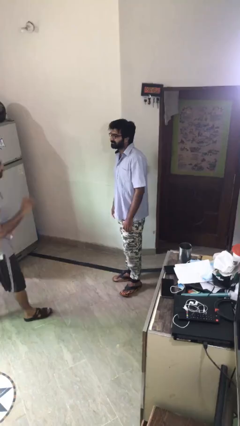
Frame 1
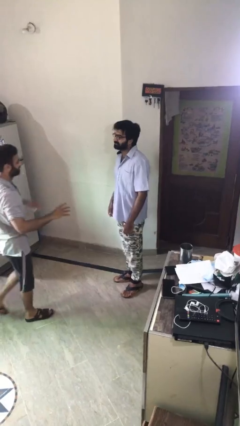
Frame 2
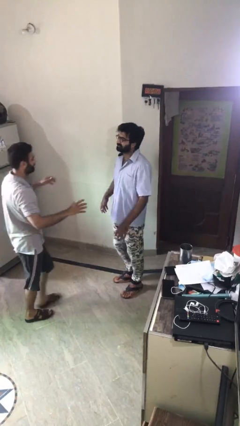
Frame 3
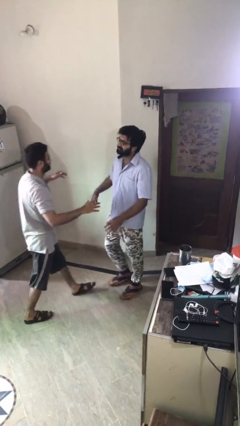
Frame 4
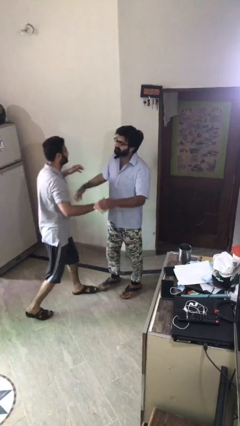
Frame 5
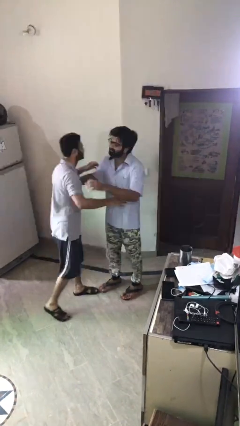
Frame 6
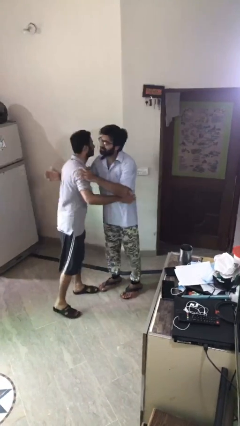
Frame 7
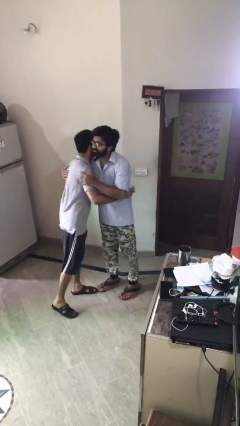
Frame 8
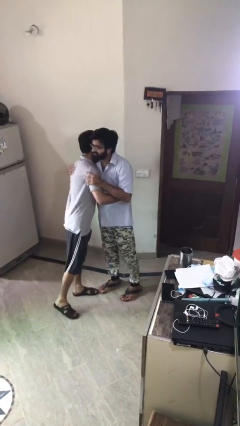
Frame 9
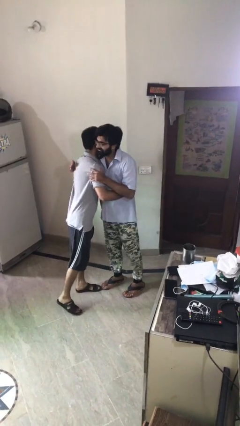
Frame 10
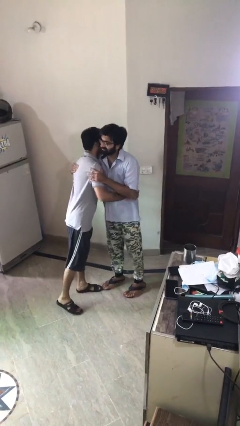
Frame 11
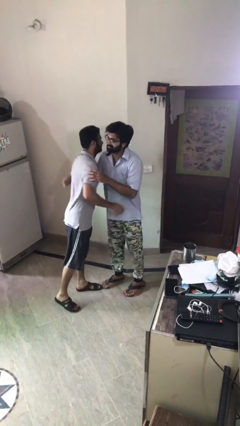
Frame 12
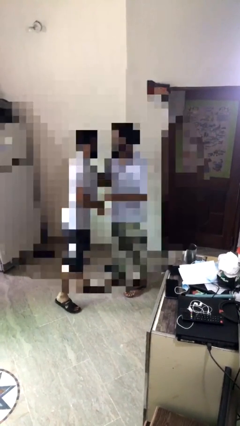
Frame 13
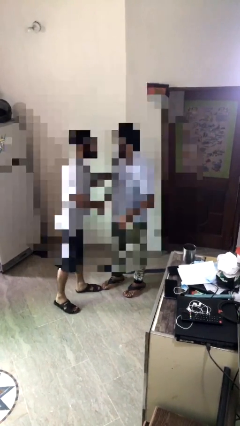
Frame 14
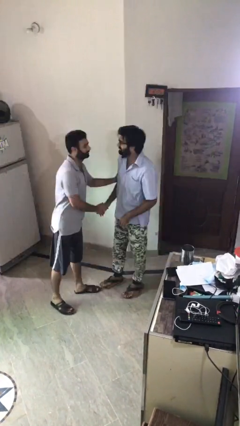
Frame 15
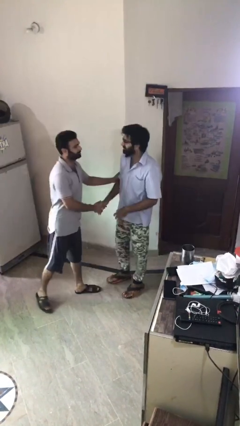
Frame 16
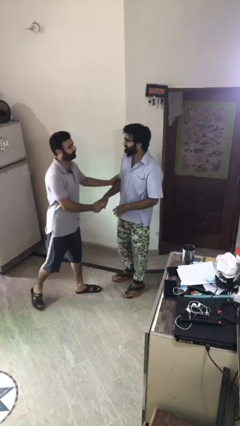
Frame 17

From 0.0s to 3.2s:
person embraces person

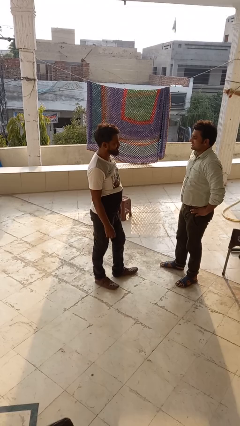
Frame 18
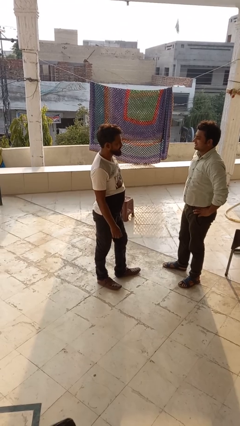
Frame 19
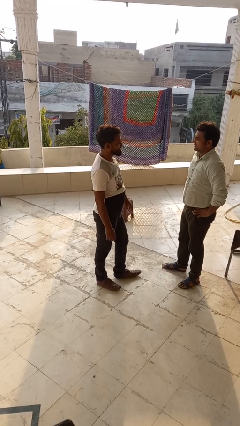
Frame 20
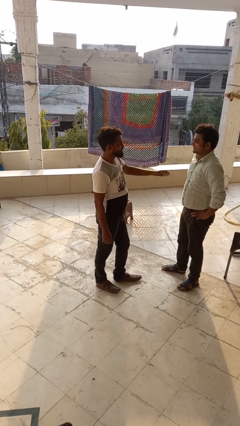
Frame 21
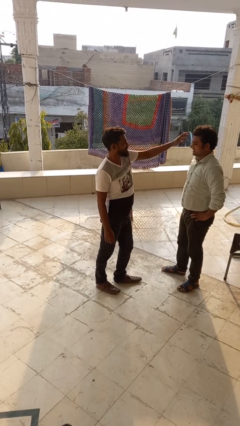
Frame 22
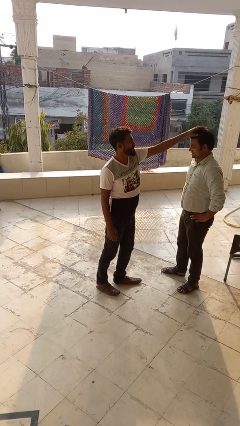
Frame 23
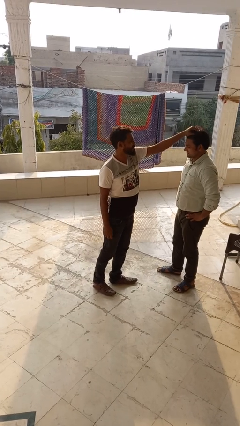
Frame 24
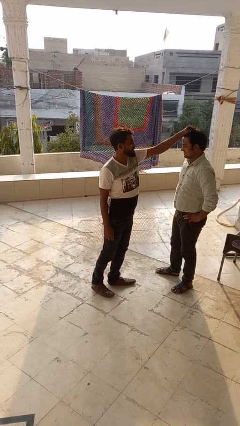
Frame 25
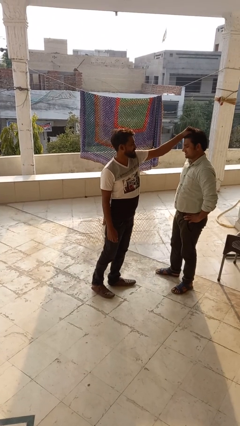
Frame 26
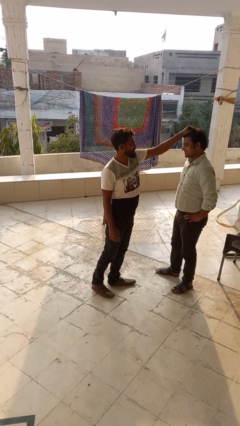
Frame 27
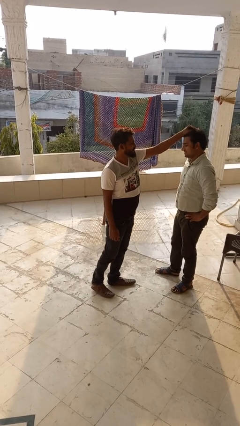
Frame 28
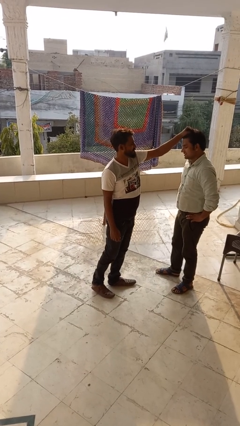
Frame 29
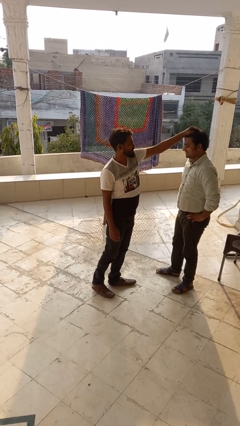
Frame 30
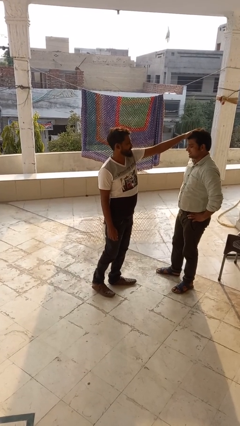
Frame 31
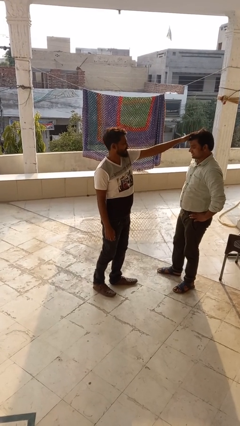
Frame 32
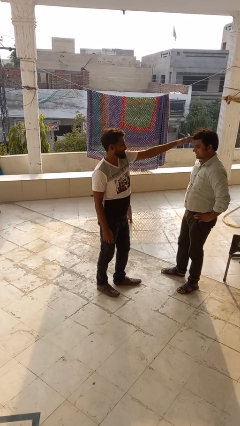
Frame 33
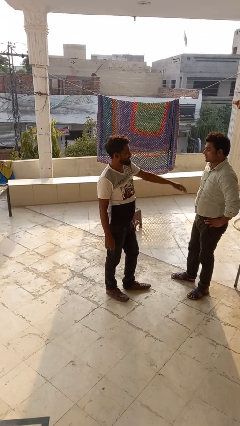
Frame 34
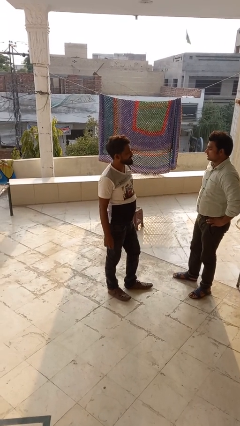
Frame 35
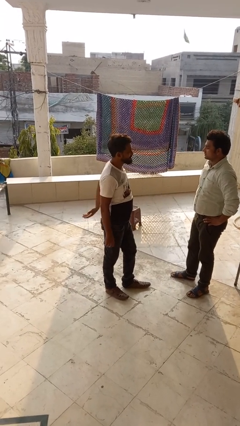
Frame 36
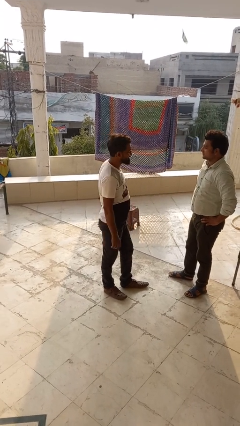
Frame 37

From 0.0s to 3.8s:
person grabs person by hair

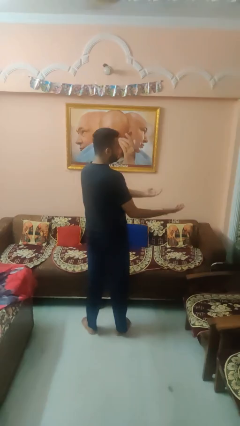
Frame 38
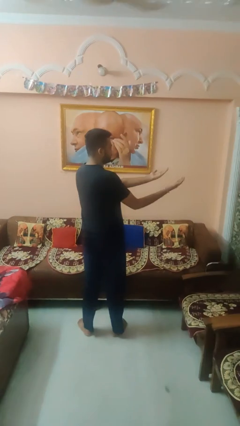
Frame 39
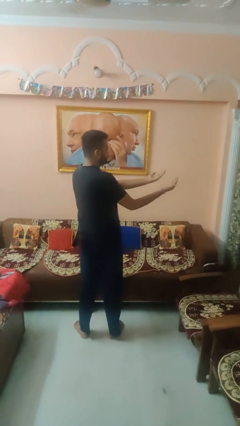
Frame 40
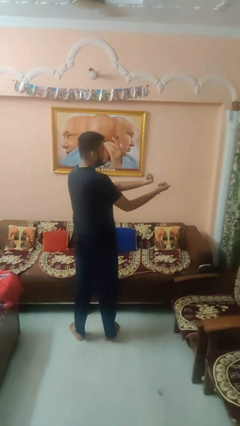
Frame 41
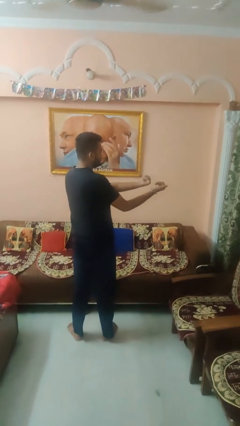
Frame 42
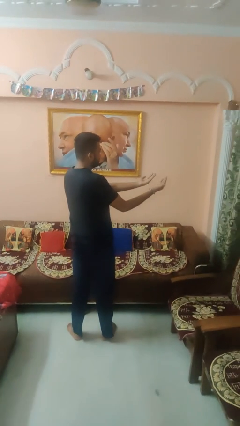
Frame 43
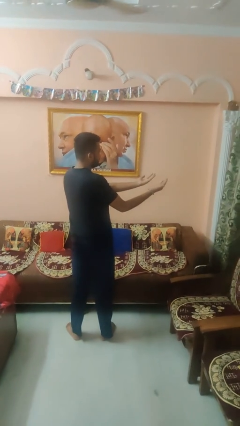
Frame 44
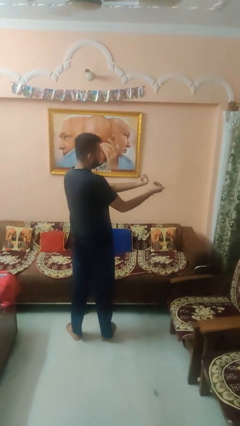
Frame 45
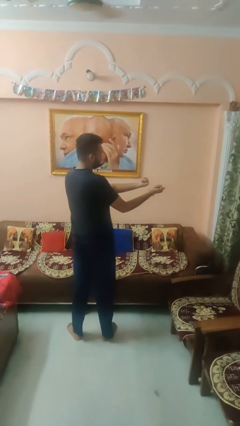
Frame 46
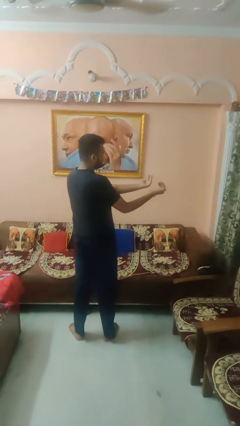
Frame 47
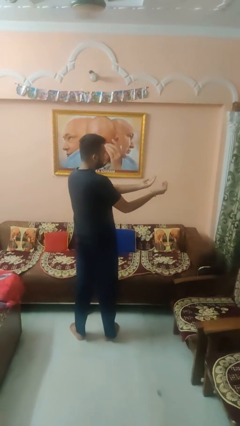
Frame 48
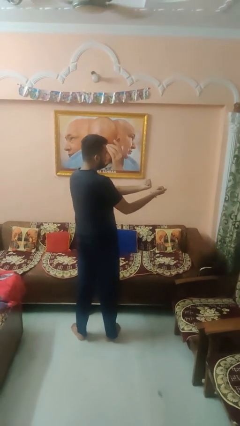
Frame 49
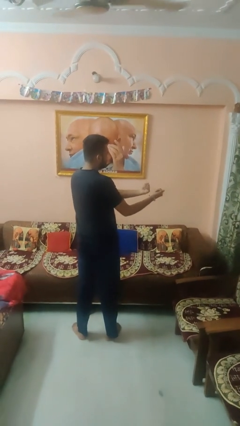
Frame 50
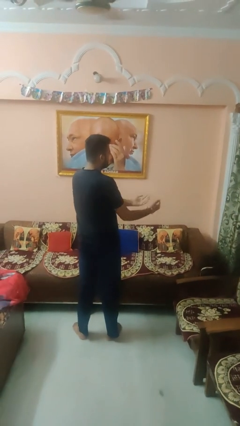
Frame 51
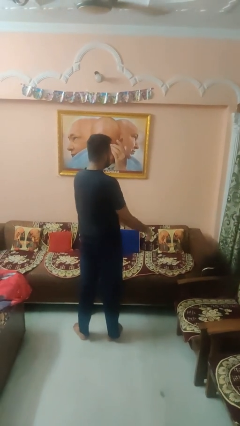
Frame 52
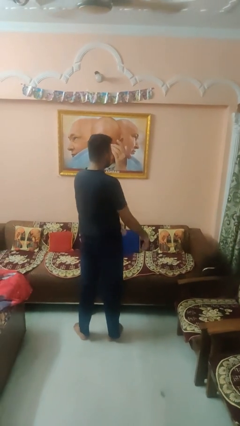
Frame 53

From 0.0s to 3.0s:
person gestures come here

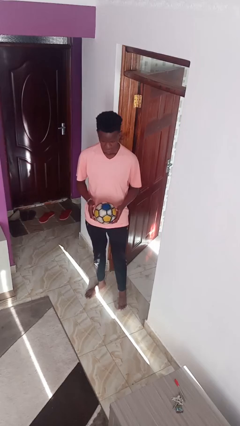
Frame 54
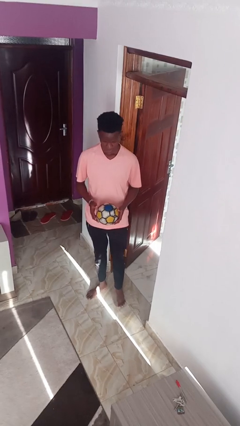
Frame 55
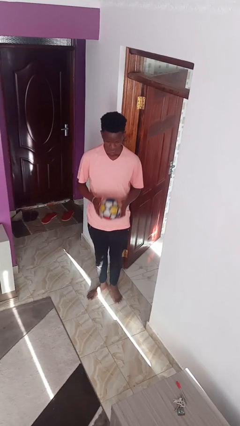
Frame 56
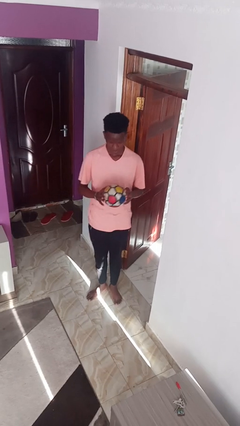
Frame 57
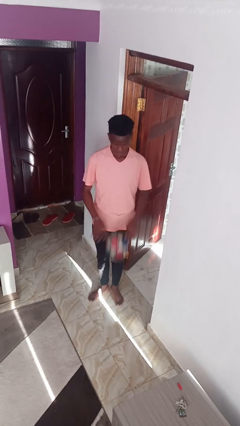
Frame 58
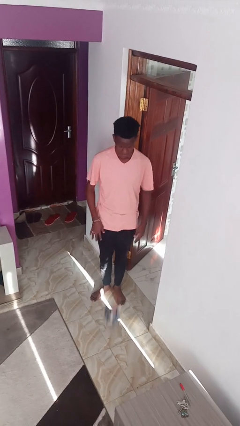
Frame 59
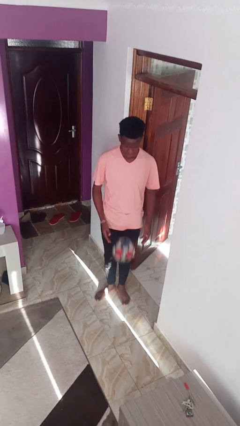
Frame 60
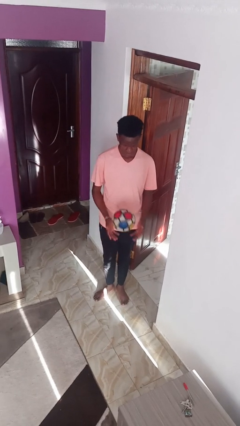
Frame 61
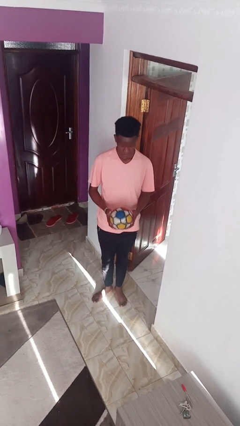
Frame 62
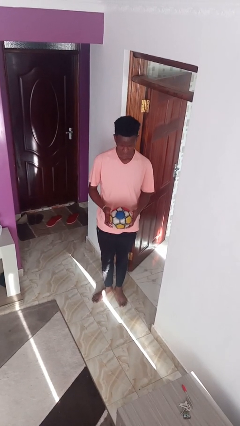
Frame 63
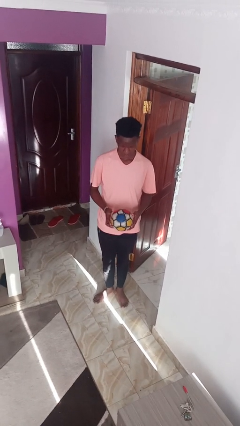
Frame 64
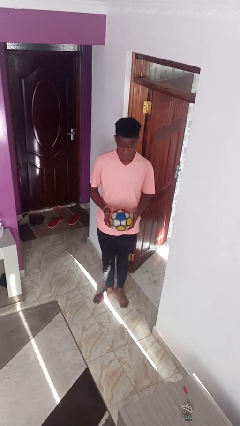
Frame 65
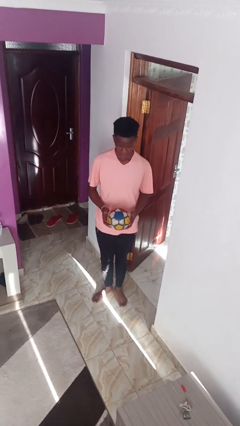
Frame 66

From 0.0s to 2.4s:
person bounces ball on floor

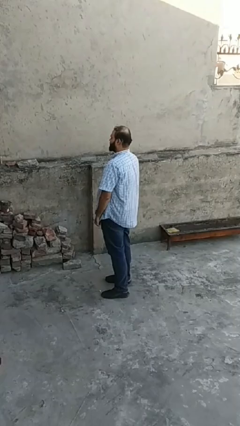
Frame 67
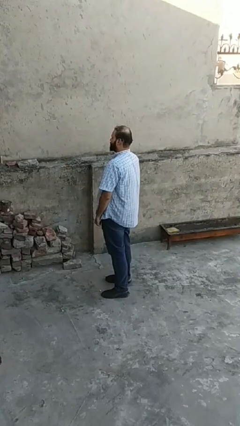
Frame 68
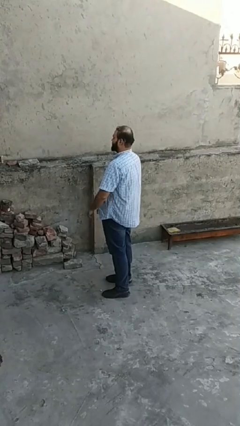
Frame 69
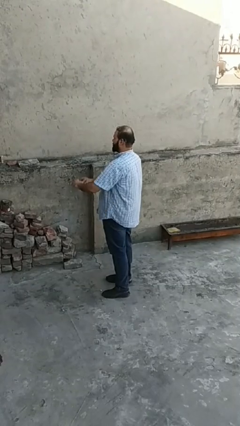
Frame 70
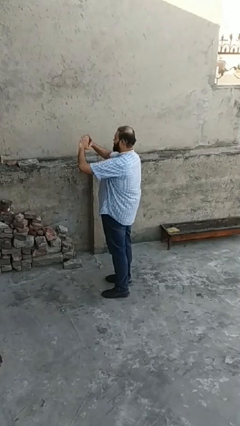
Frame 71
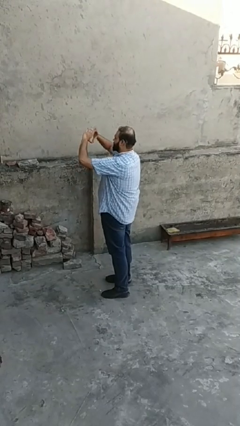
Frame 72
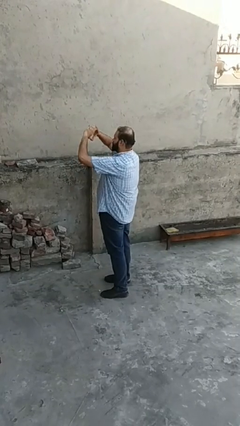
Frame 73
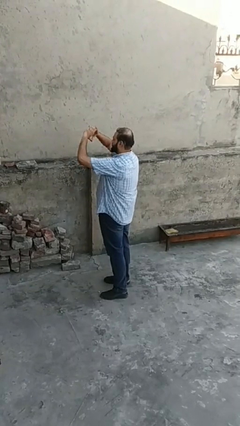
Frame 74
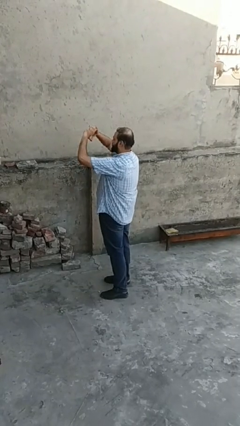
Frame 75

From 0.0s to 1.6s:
person gestures heart

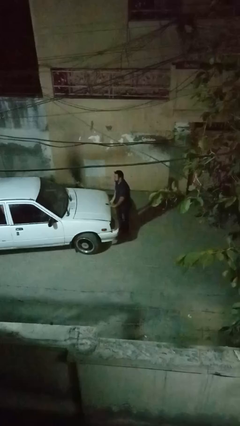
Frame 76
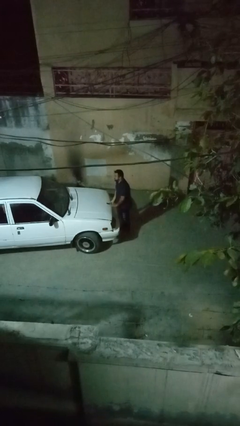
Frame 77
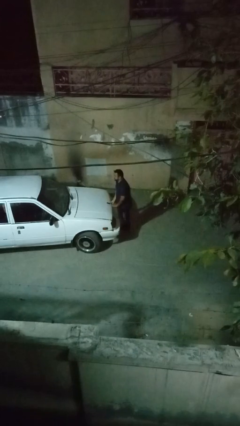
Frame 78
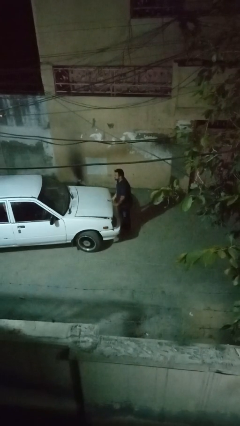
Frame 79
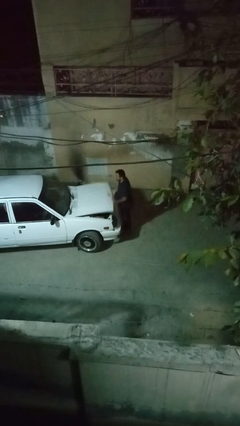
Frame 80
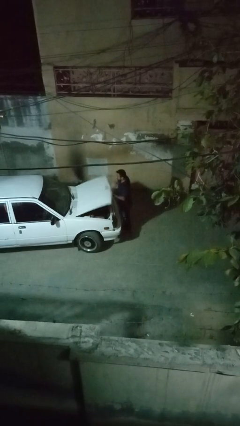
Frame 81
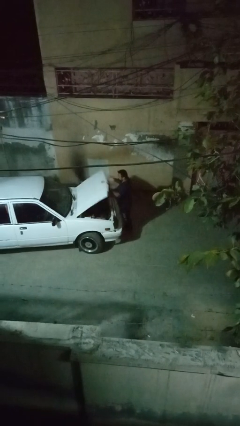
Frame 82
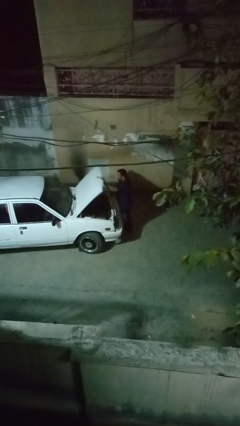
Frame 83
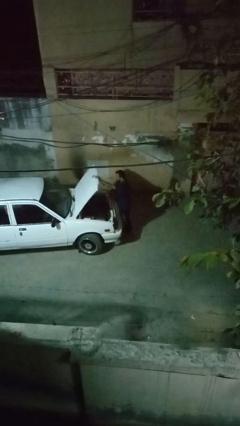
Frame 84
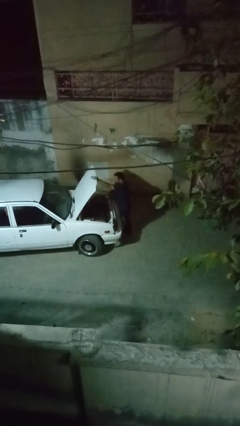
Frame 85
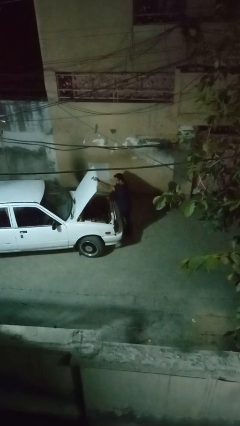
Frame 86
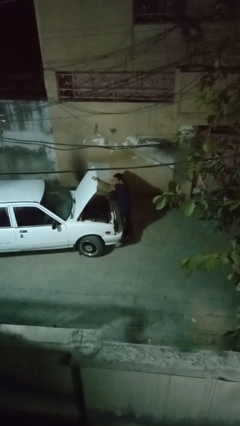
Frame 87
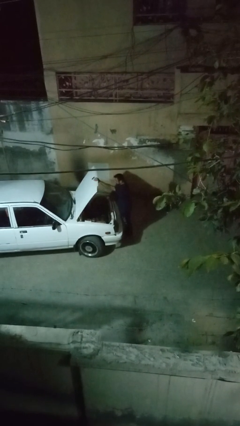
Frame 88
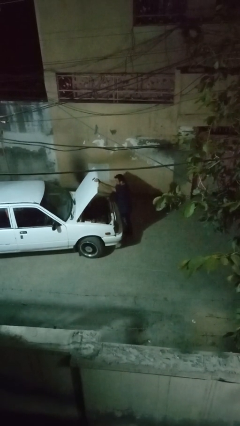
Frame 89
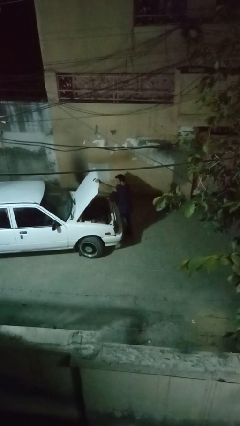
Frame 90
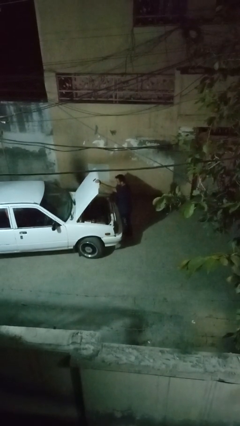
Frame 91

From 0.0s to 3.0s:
person opens car hood
